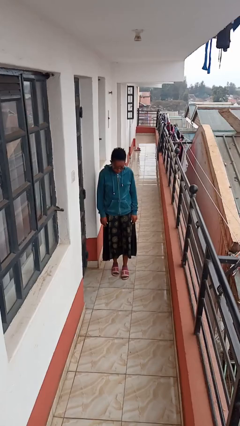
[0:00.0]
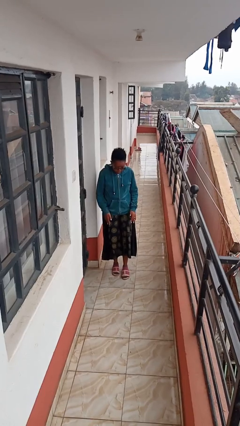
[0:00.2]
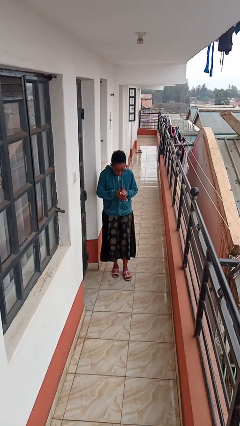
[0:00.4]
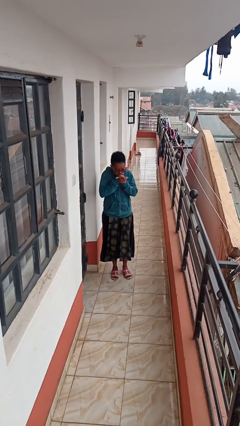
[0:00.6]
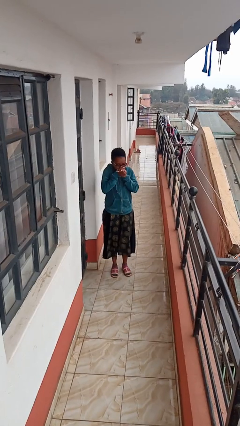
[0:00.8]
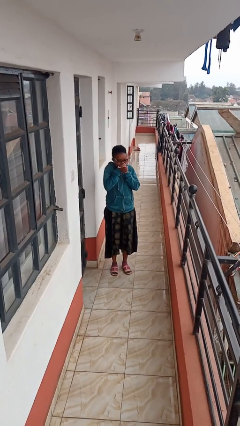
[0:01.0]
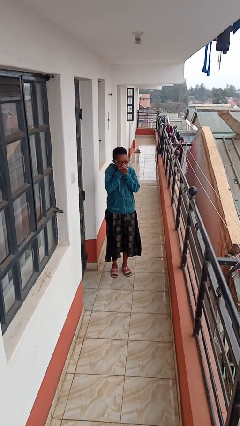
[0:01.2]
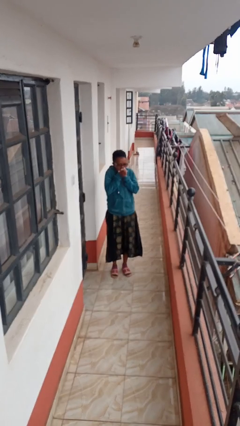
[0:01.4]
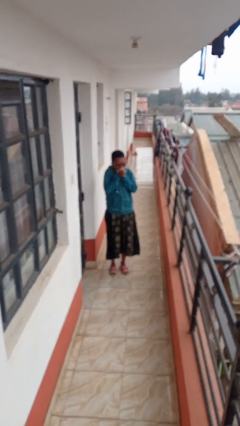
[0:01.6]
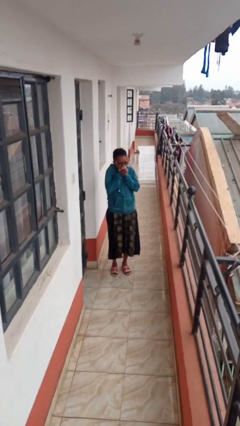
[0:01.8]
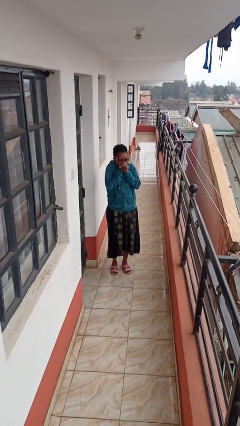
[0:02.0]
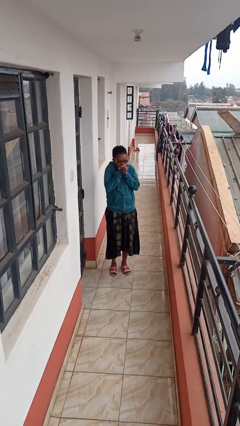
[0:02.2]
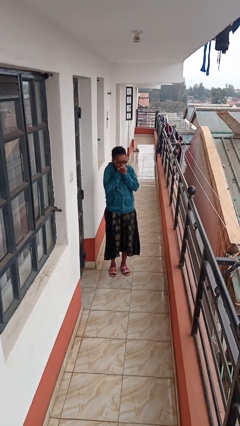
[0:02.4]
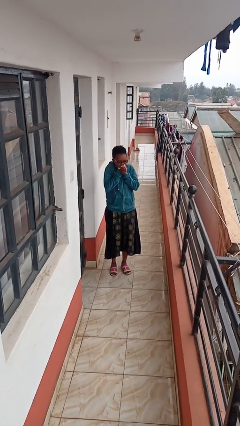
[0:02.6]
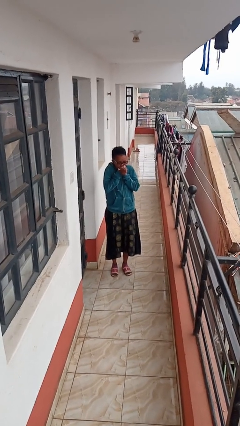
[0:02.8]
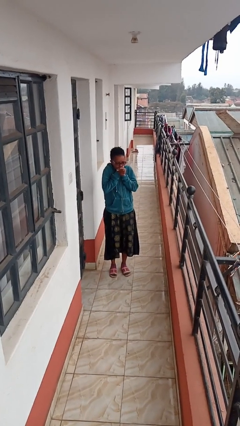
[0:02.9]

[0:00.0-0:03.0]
person blows into hands

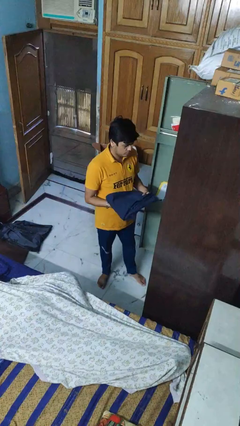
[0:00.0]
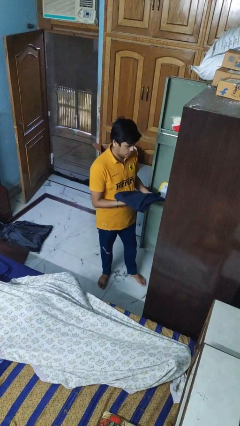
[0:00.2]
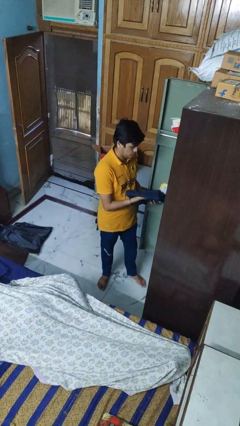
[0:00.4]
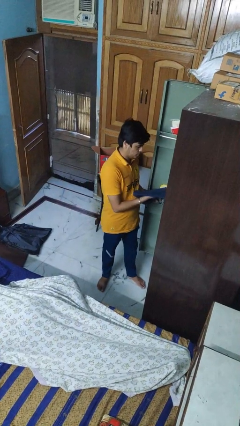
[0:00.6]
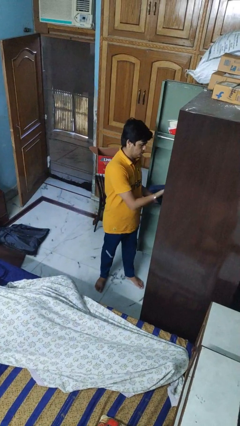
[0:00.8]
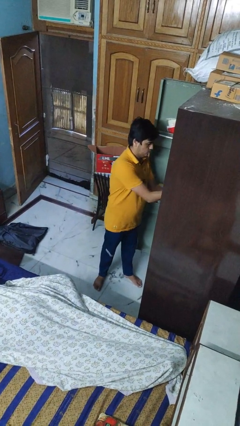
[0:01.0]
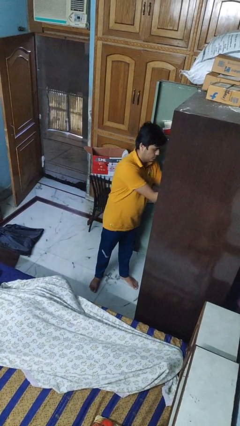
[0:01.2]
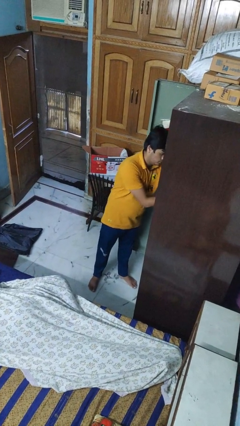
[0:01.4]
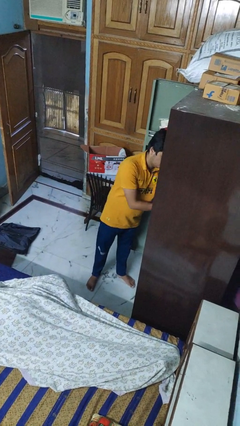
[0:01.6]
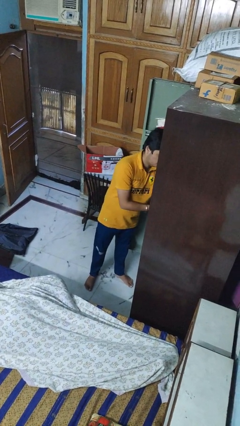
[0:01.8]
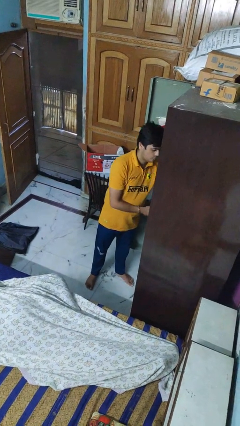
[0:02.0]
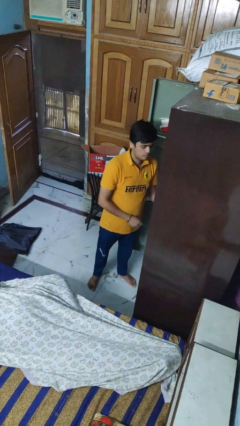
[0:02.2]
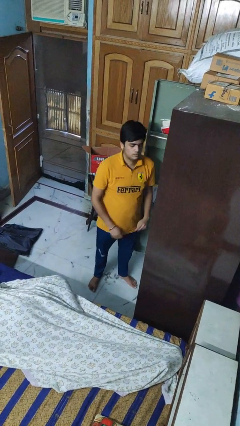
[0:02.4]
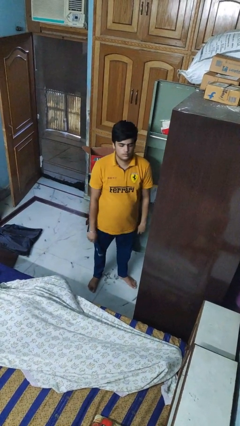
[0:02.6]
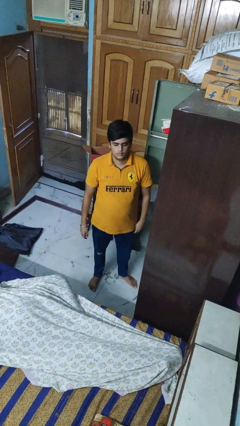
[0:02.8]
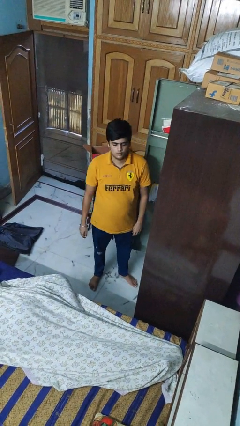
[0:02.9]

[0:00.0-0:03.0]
person puts clothes into dresser

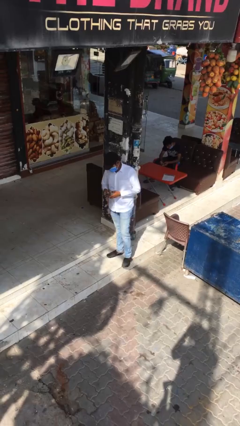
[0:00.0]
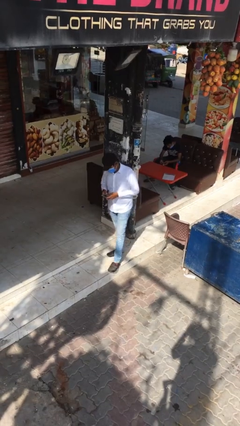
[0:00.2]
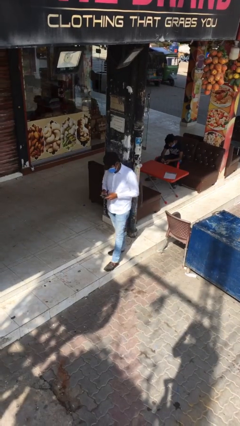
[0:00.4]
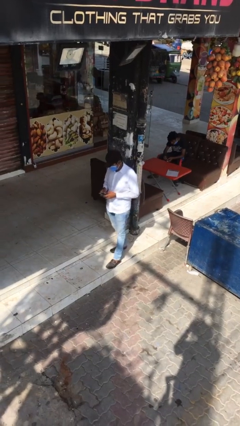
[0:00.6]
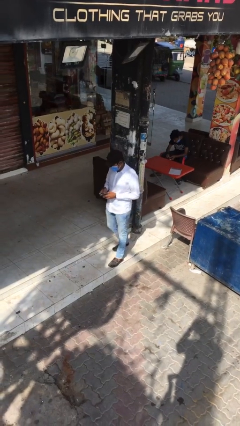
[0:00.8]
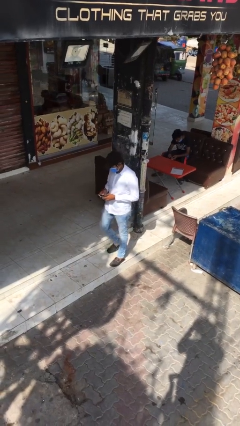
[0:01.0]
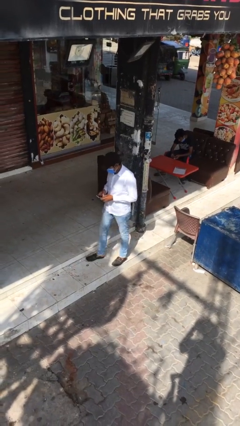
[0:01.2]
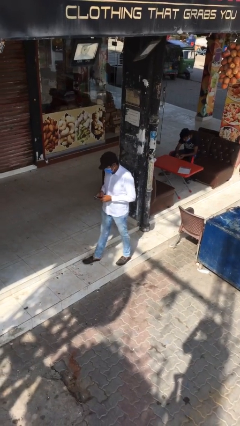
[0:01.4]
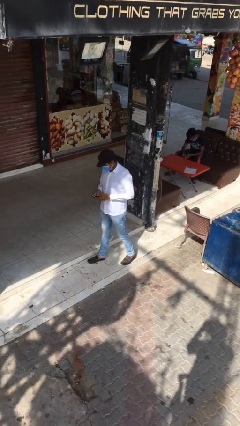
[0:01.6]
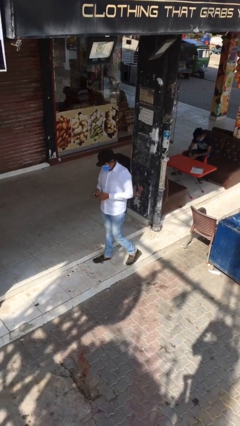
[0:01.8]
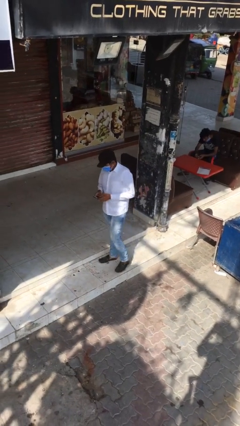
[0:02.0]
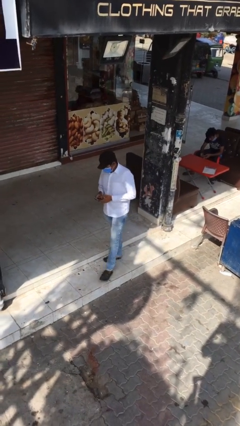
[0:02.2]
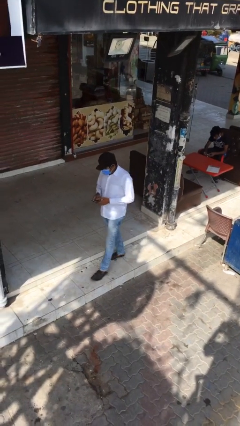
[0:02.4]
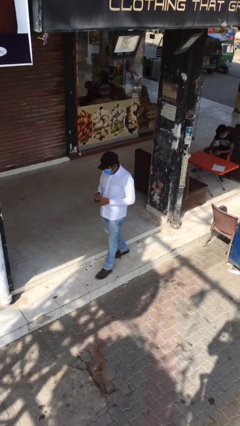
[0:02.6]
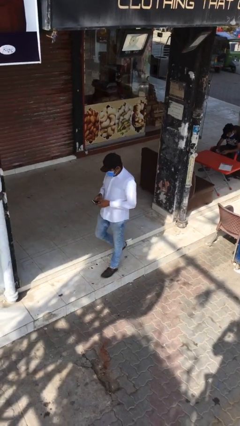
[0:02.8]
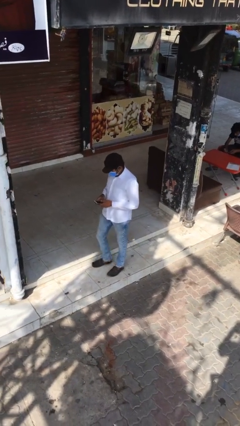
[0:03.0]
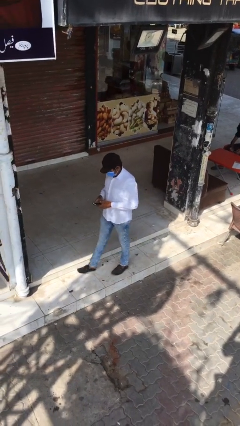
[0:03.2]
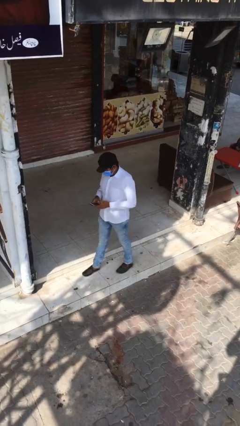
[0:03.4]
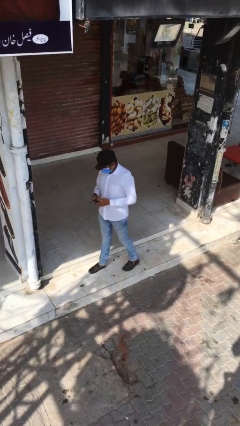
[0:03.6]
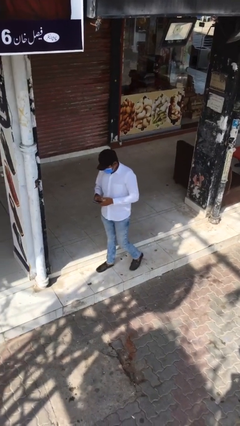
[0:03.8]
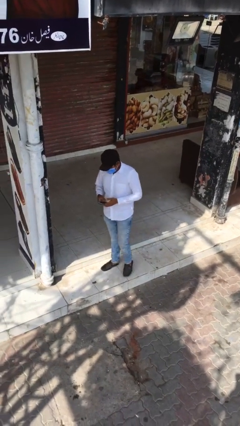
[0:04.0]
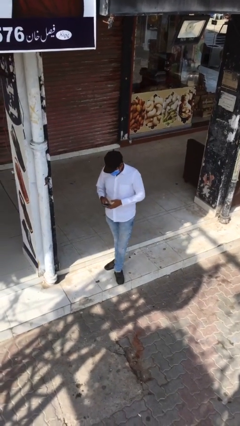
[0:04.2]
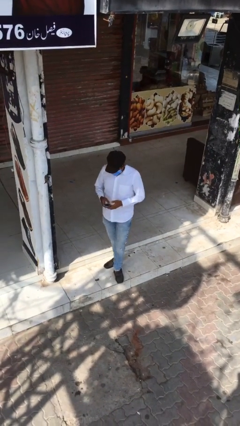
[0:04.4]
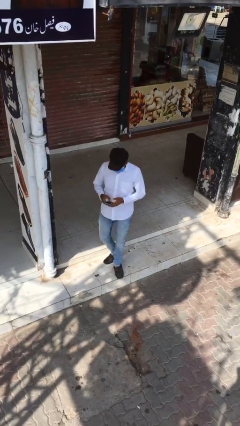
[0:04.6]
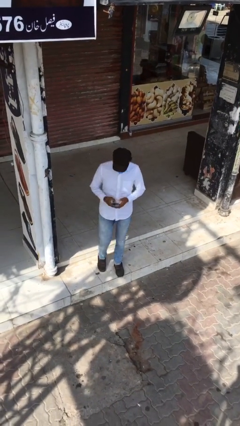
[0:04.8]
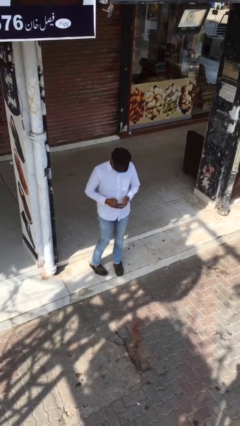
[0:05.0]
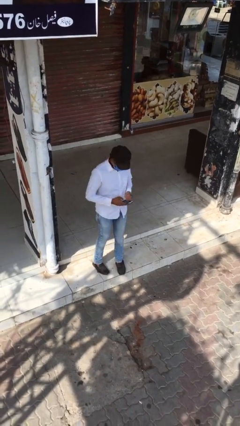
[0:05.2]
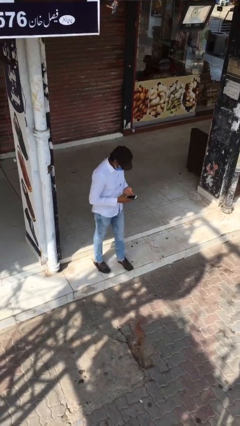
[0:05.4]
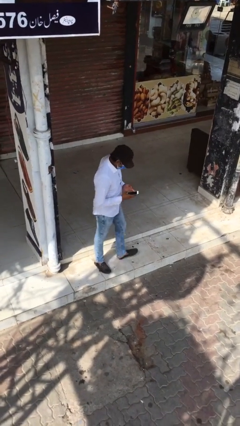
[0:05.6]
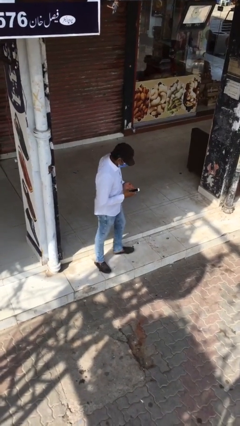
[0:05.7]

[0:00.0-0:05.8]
person texts on phone

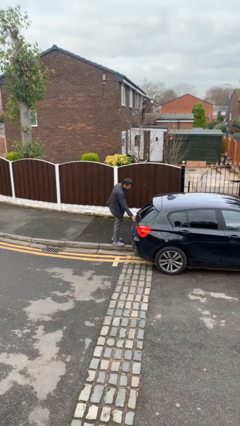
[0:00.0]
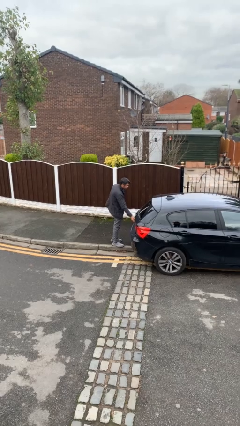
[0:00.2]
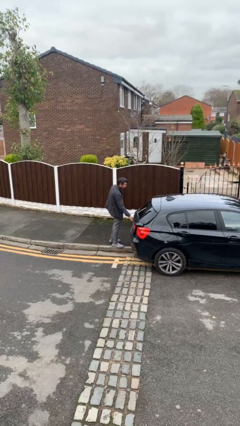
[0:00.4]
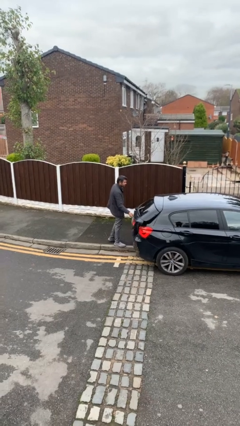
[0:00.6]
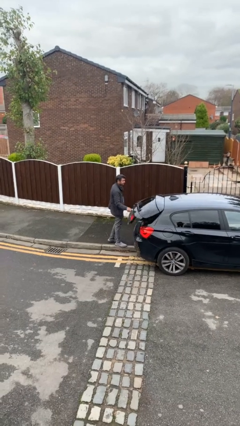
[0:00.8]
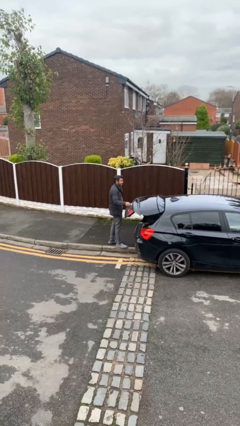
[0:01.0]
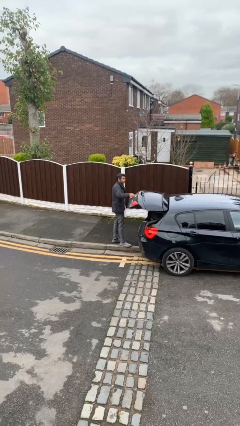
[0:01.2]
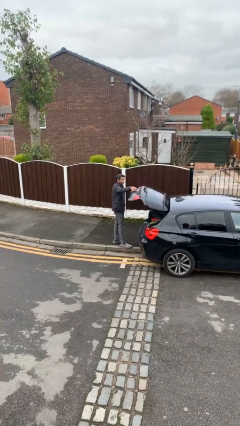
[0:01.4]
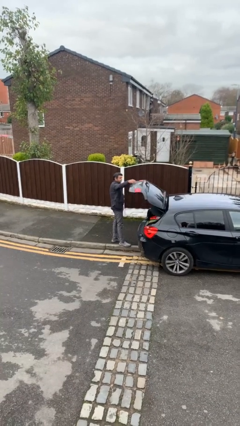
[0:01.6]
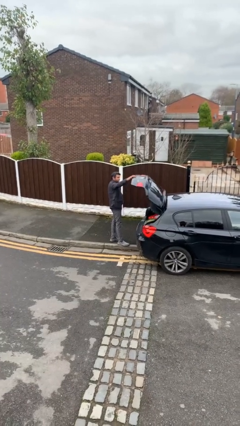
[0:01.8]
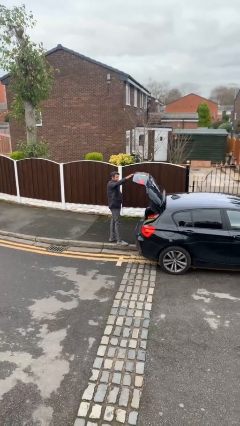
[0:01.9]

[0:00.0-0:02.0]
person opens car trunk

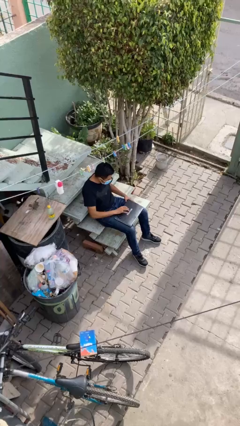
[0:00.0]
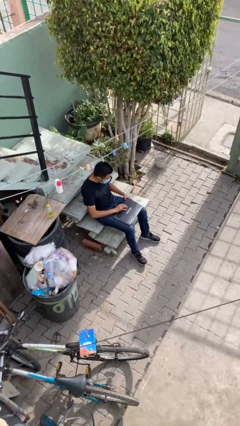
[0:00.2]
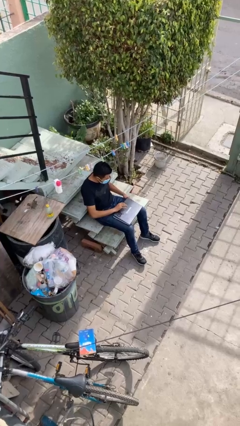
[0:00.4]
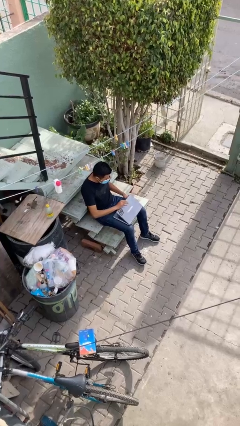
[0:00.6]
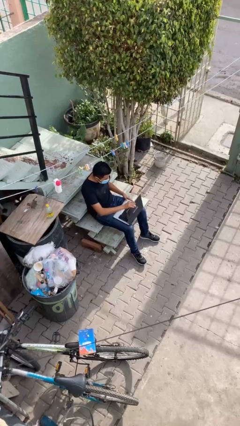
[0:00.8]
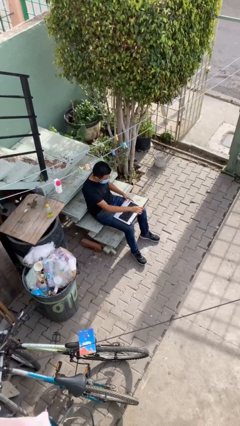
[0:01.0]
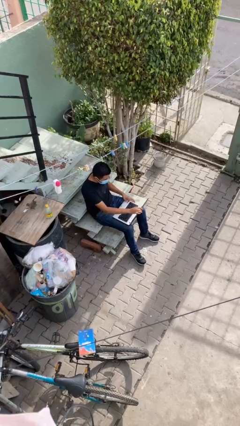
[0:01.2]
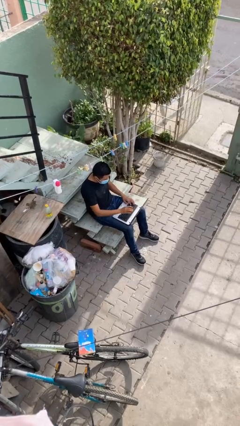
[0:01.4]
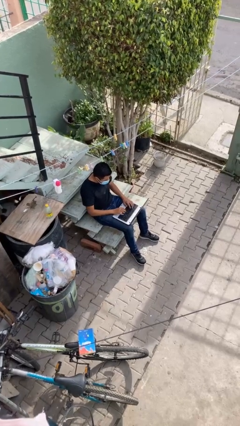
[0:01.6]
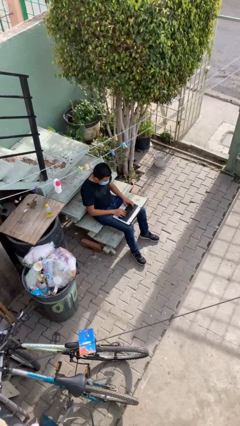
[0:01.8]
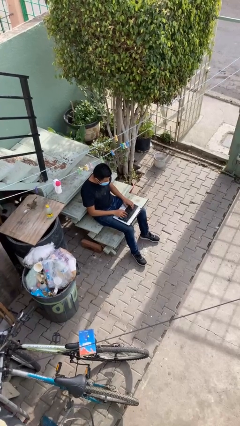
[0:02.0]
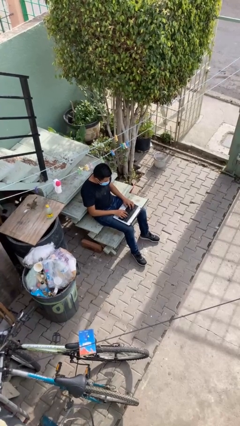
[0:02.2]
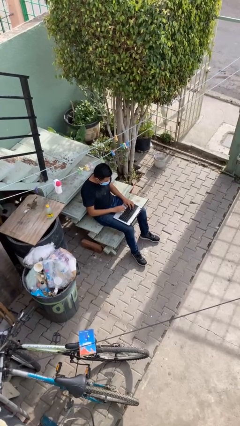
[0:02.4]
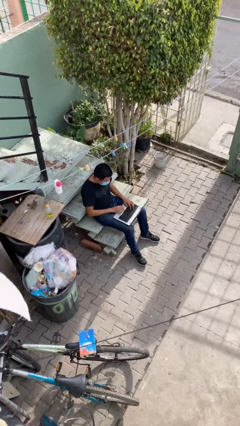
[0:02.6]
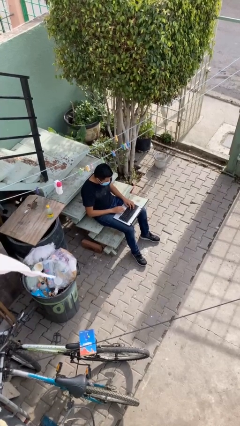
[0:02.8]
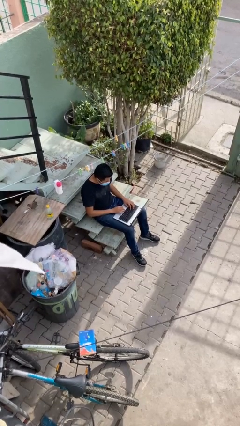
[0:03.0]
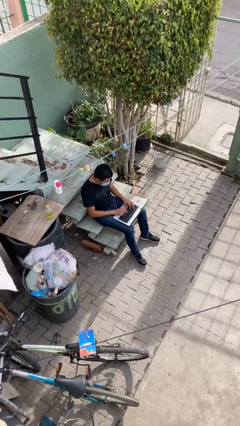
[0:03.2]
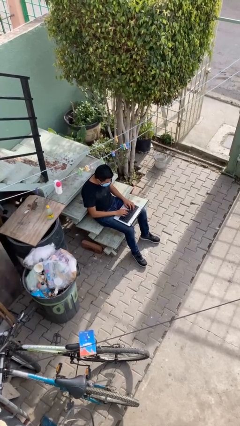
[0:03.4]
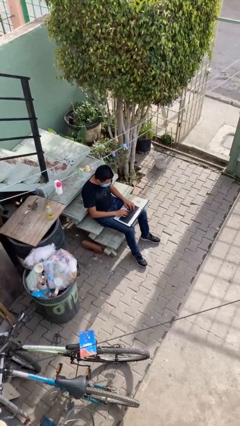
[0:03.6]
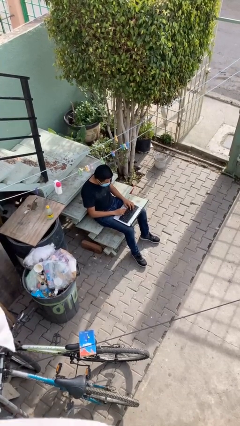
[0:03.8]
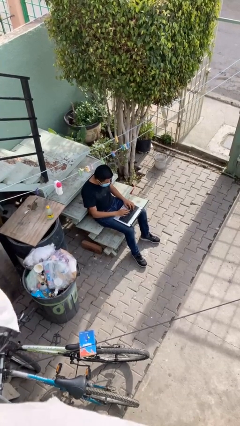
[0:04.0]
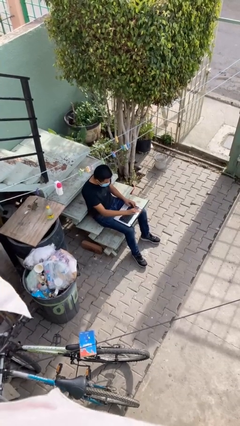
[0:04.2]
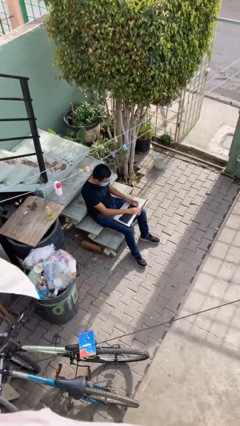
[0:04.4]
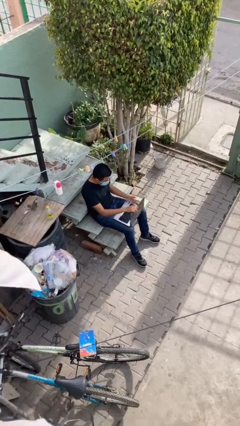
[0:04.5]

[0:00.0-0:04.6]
person interacts with laptop
